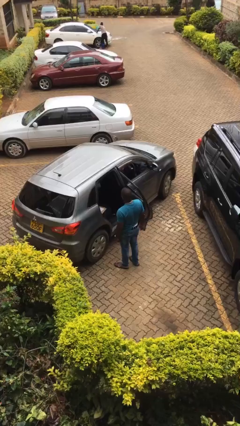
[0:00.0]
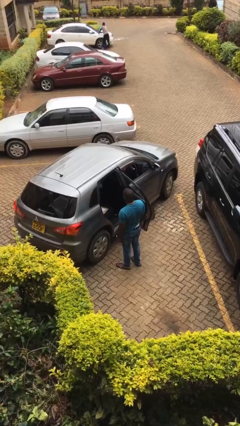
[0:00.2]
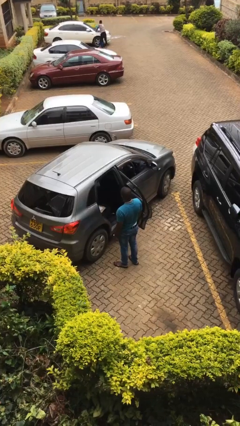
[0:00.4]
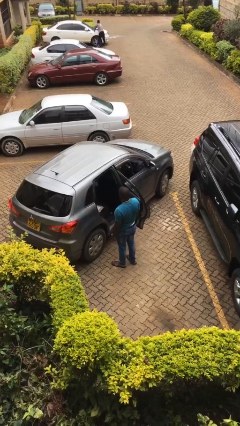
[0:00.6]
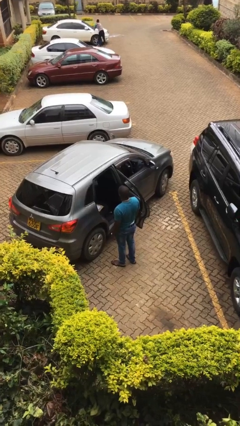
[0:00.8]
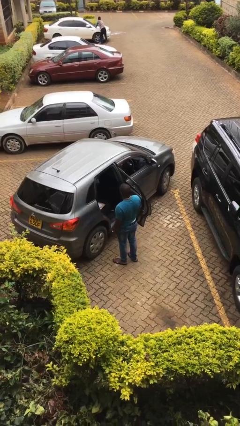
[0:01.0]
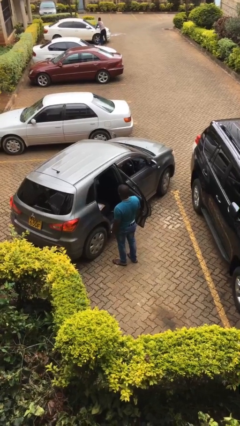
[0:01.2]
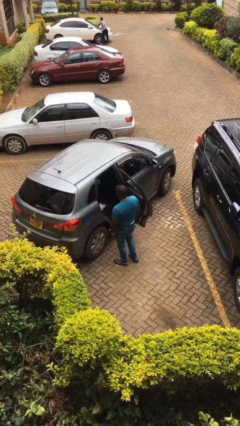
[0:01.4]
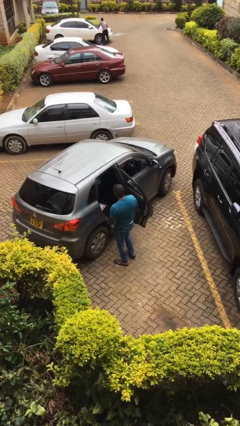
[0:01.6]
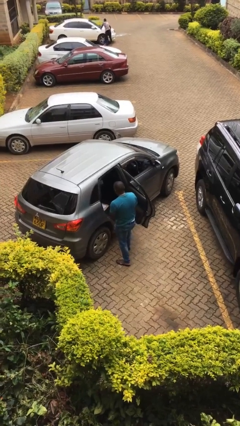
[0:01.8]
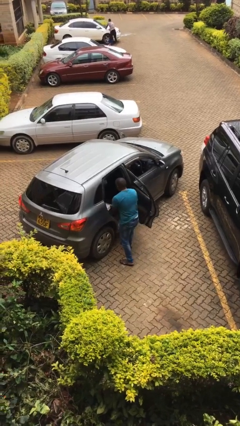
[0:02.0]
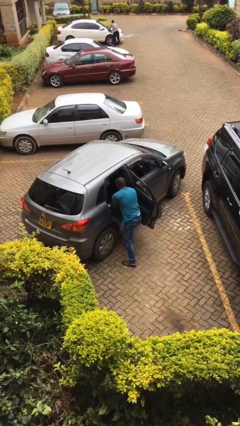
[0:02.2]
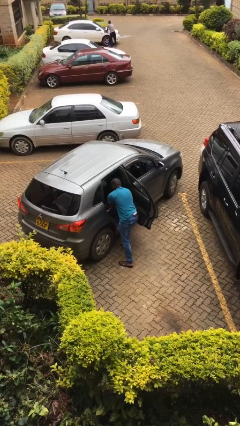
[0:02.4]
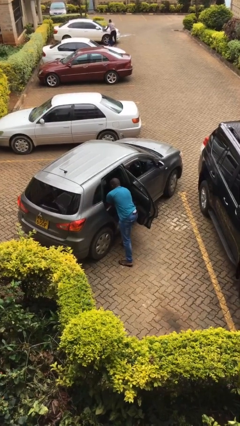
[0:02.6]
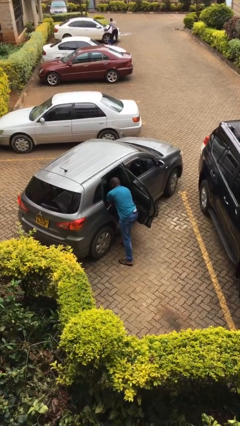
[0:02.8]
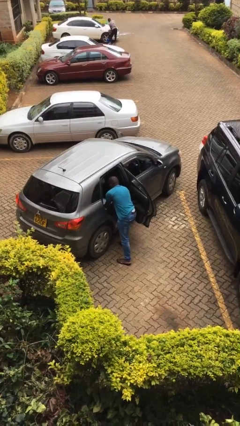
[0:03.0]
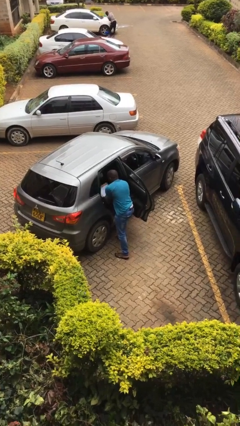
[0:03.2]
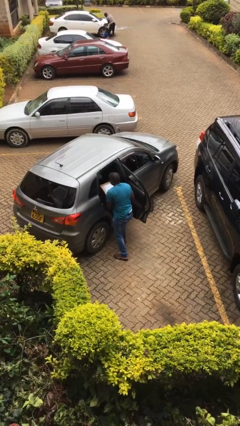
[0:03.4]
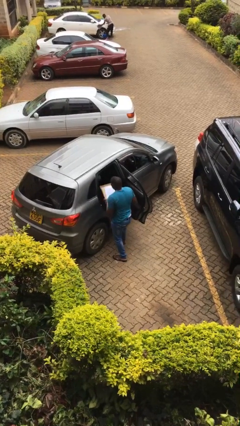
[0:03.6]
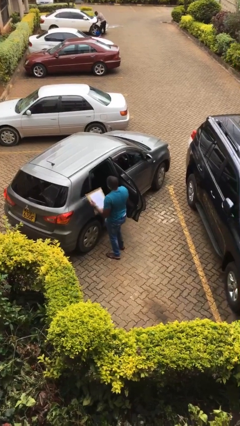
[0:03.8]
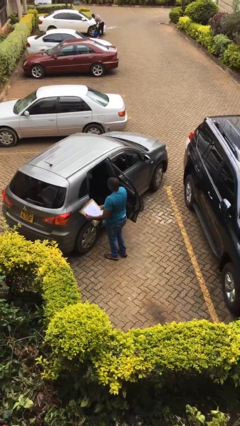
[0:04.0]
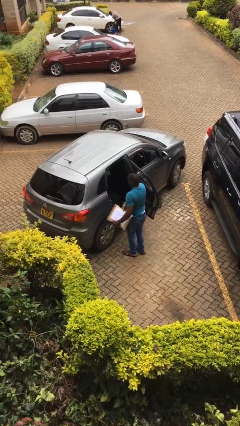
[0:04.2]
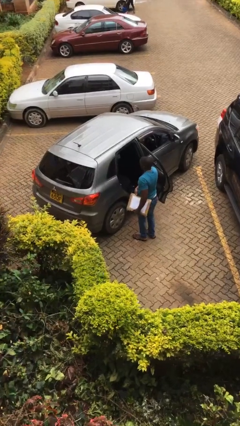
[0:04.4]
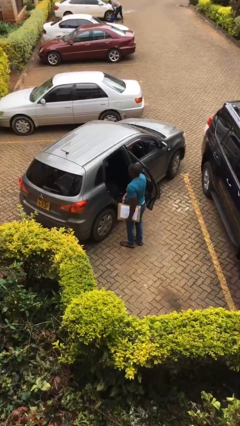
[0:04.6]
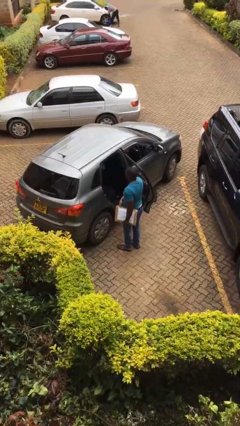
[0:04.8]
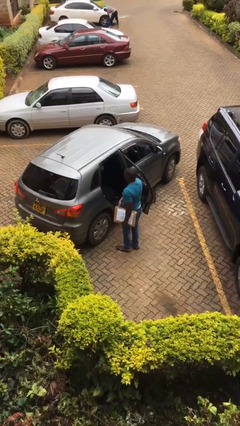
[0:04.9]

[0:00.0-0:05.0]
person unloads car

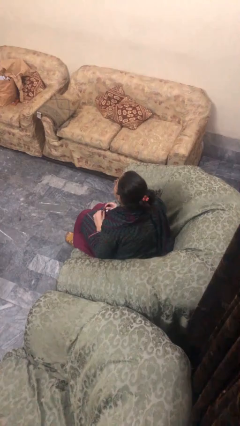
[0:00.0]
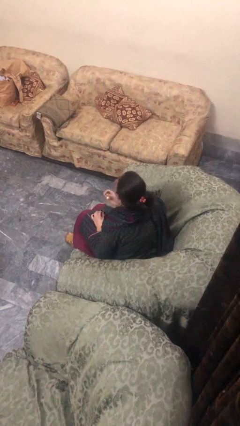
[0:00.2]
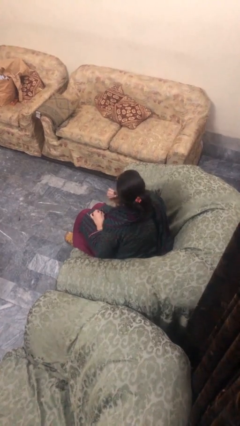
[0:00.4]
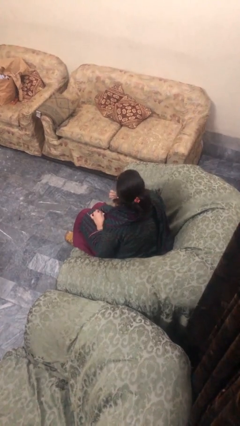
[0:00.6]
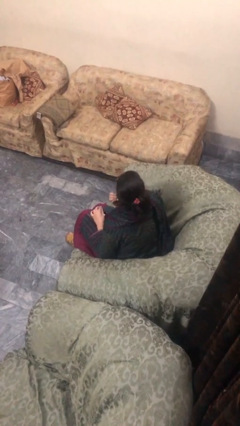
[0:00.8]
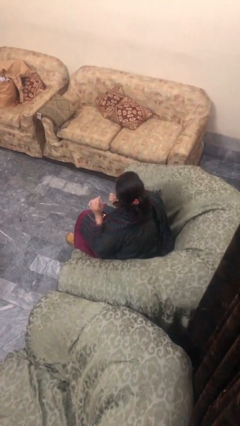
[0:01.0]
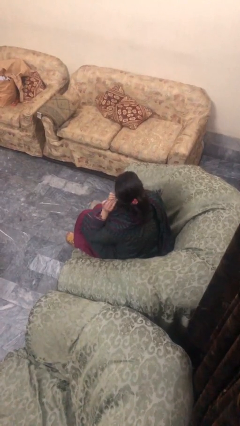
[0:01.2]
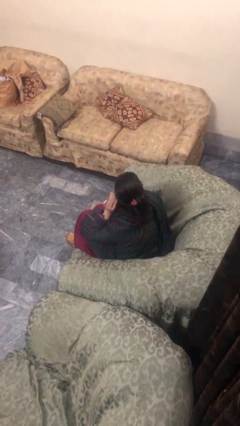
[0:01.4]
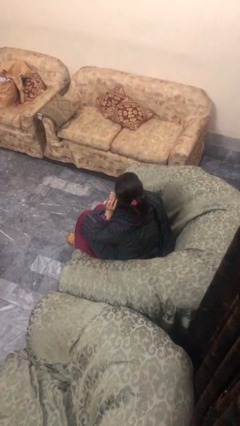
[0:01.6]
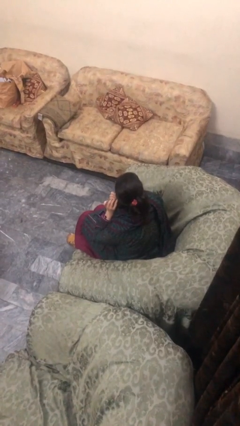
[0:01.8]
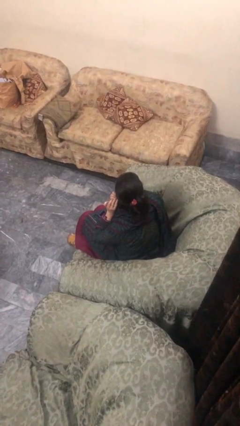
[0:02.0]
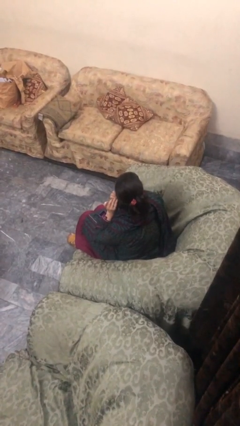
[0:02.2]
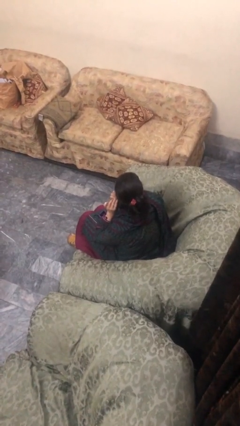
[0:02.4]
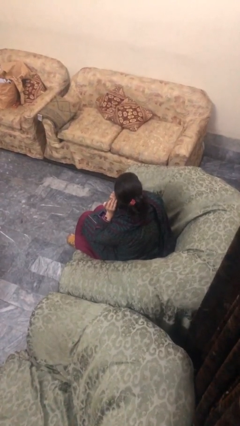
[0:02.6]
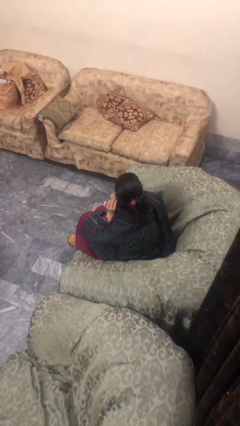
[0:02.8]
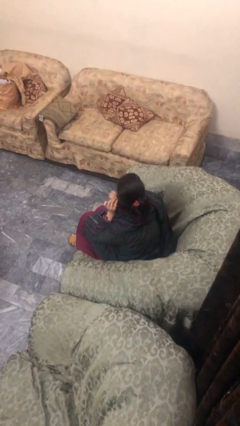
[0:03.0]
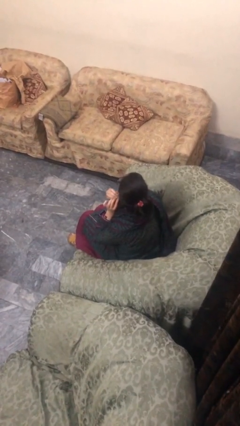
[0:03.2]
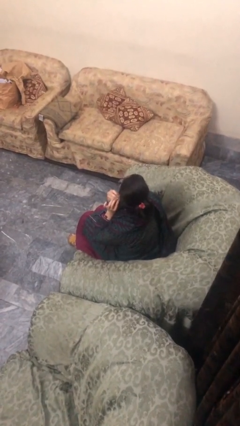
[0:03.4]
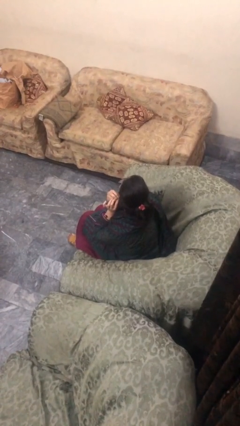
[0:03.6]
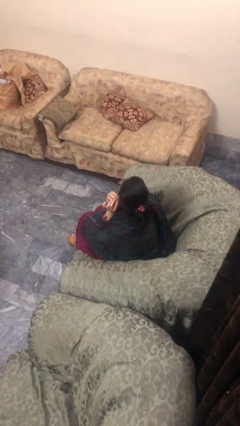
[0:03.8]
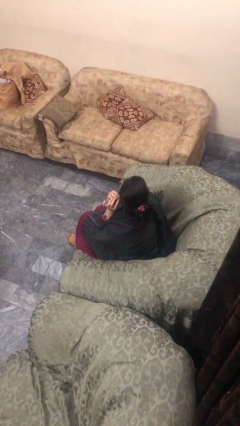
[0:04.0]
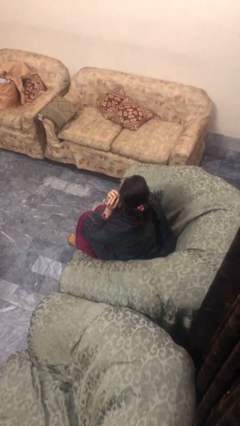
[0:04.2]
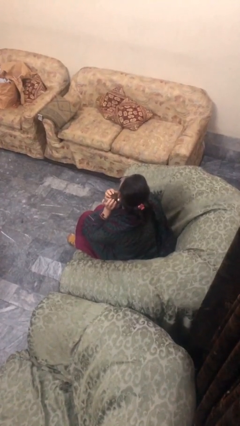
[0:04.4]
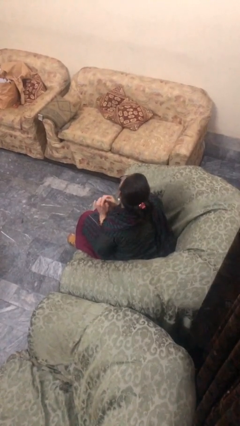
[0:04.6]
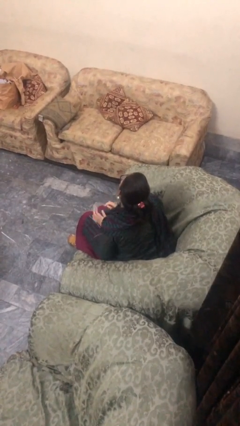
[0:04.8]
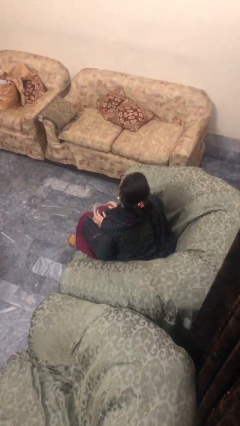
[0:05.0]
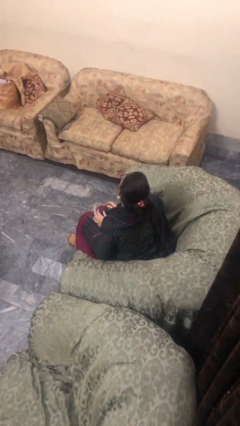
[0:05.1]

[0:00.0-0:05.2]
person puts on earrings

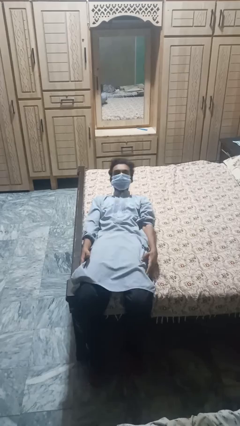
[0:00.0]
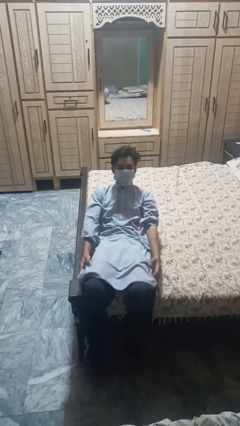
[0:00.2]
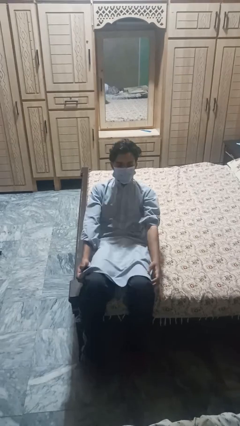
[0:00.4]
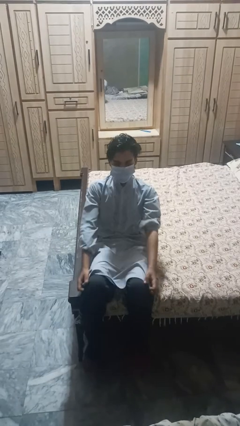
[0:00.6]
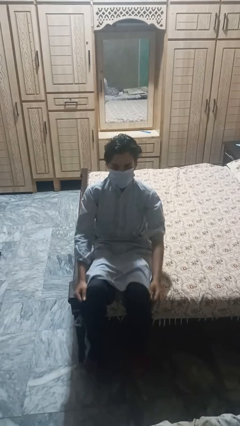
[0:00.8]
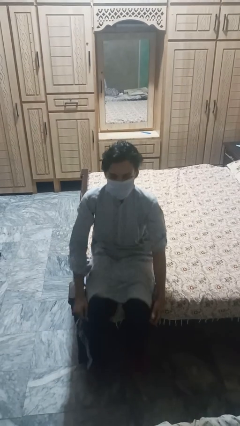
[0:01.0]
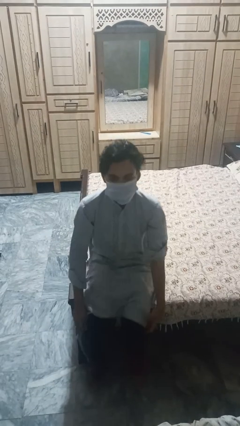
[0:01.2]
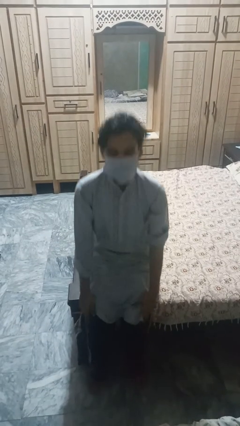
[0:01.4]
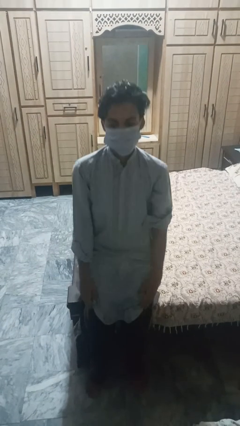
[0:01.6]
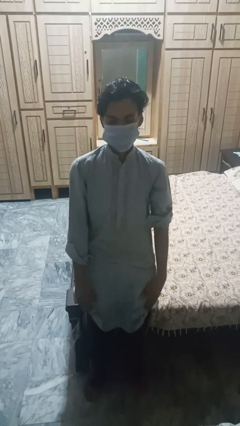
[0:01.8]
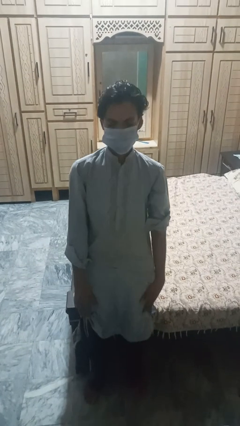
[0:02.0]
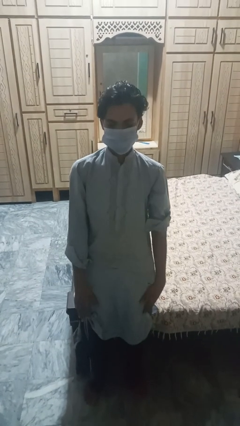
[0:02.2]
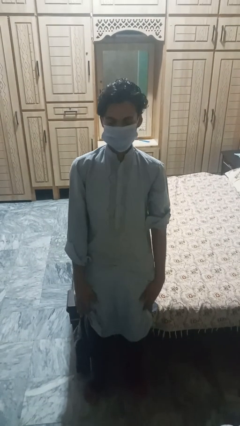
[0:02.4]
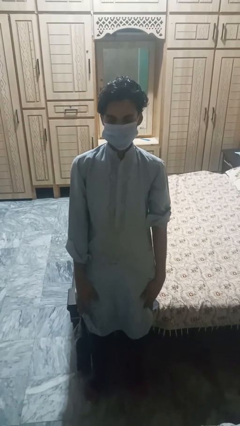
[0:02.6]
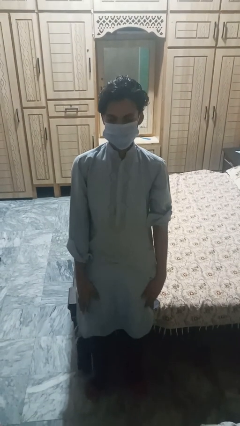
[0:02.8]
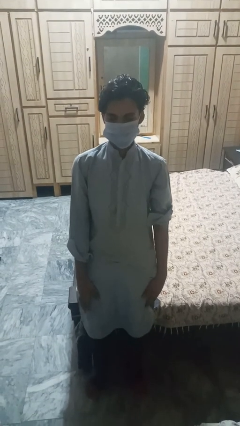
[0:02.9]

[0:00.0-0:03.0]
person stands up

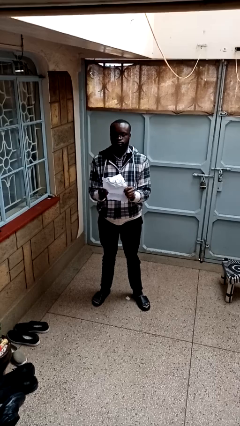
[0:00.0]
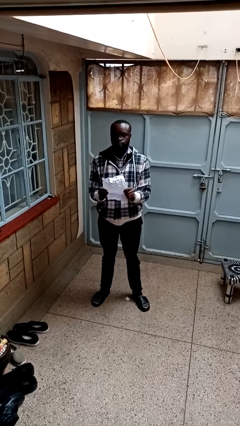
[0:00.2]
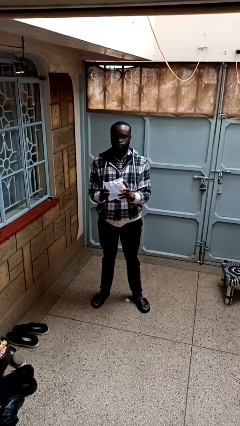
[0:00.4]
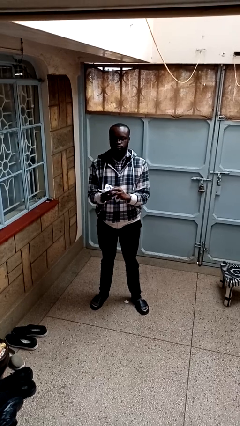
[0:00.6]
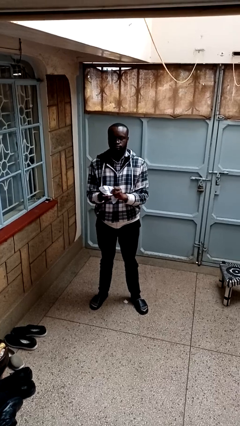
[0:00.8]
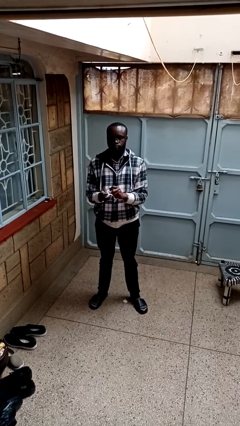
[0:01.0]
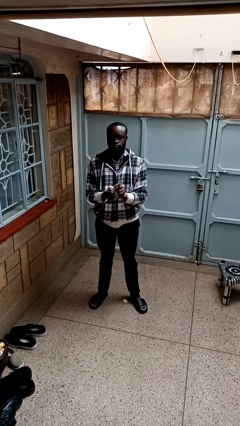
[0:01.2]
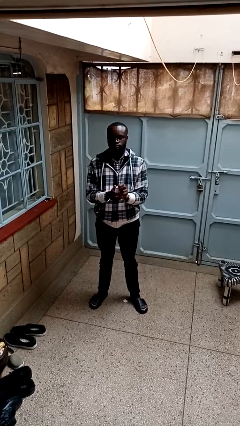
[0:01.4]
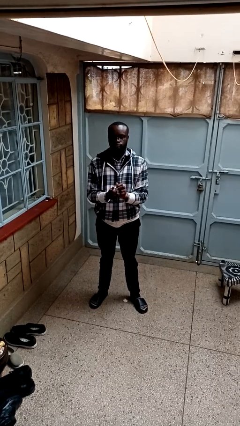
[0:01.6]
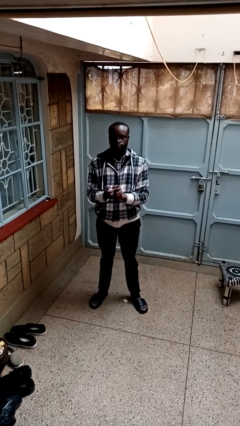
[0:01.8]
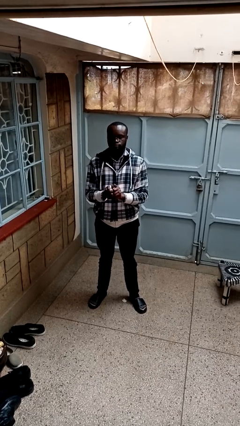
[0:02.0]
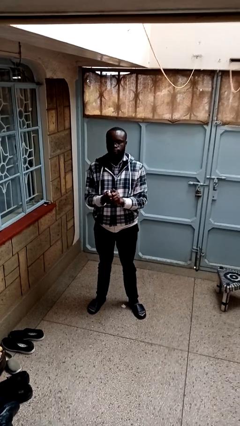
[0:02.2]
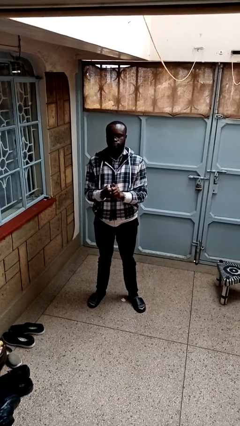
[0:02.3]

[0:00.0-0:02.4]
person crumples paper

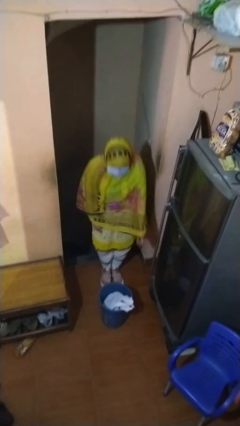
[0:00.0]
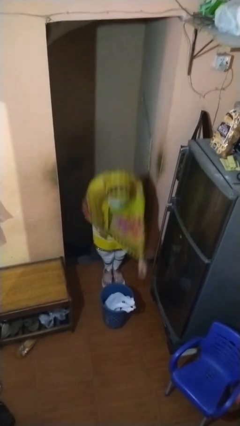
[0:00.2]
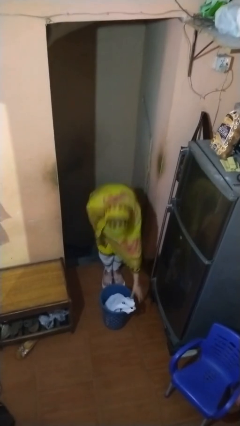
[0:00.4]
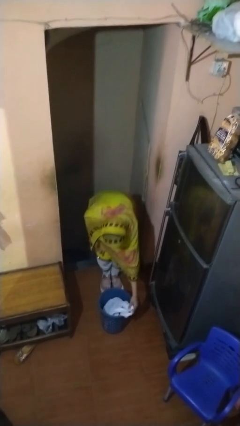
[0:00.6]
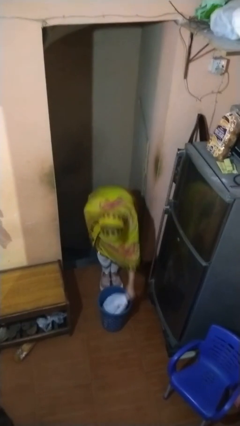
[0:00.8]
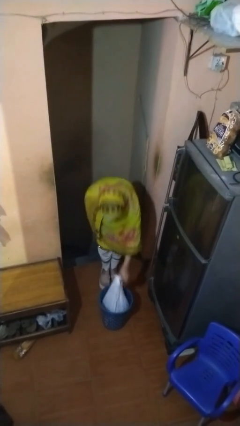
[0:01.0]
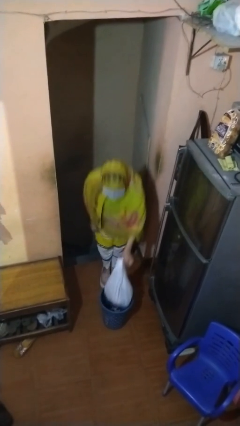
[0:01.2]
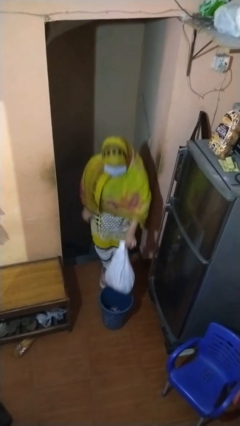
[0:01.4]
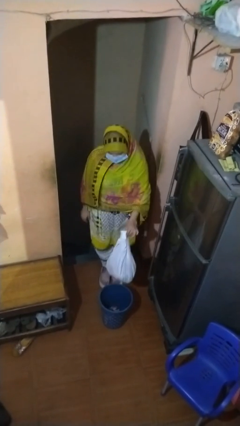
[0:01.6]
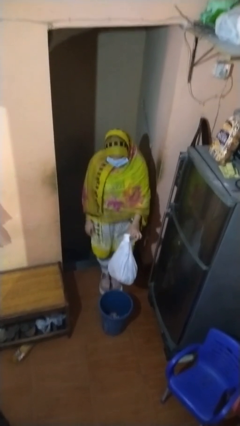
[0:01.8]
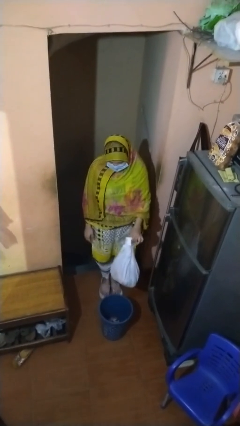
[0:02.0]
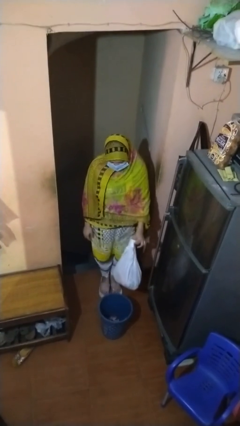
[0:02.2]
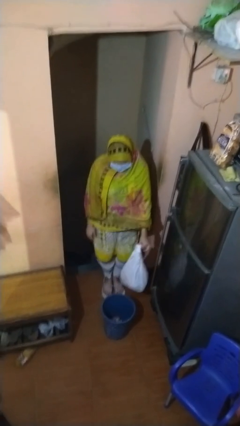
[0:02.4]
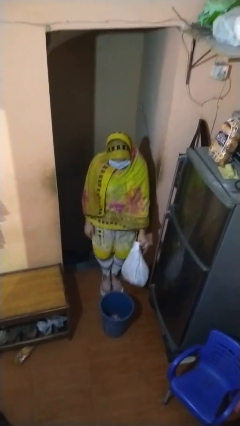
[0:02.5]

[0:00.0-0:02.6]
person removes trashbag from trashcan
